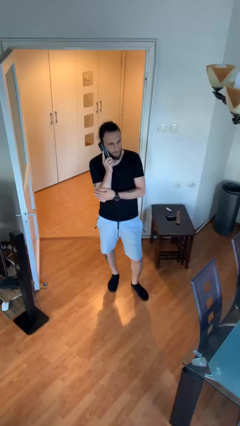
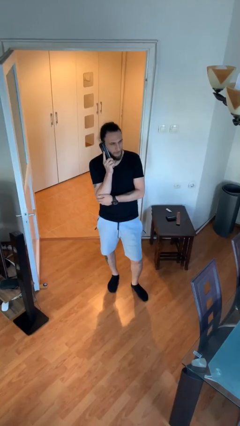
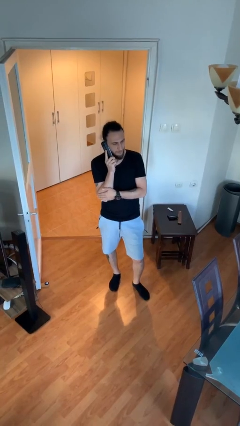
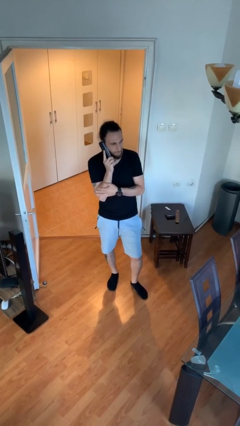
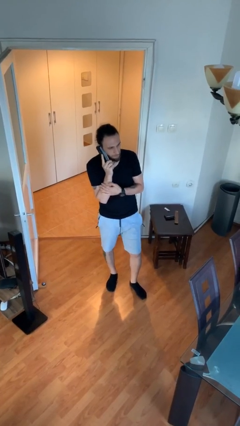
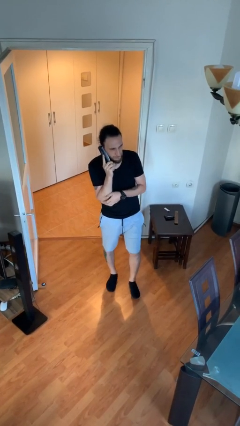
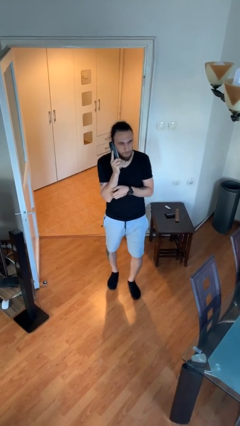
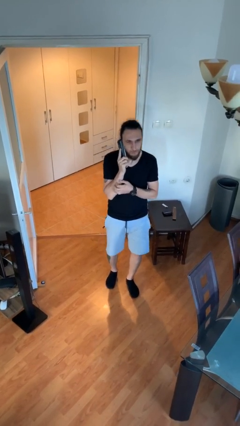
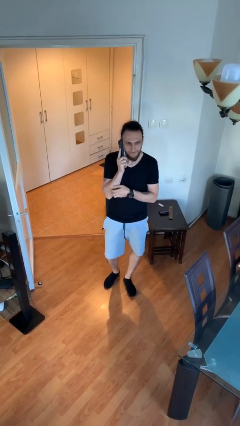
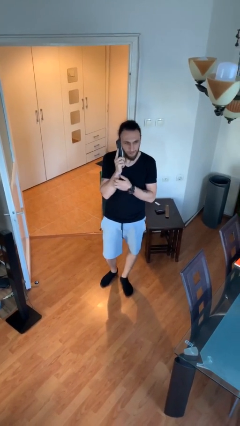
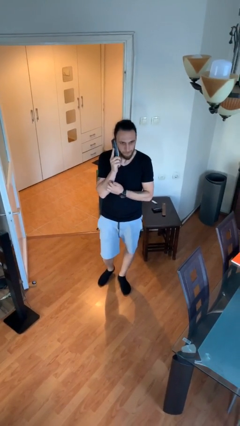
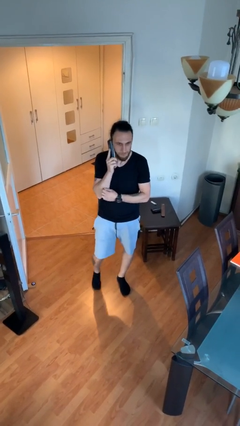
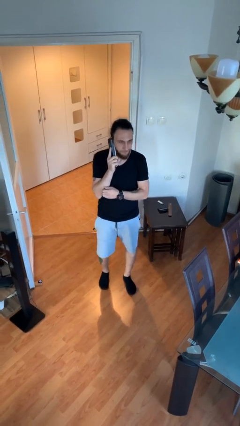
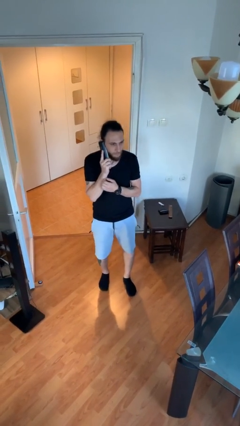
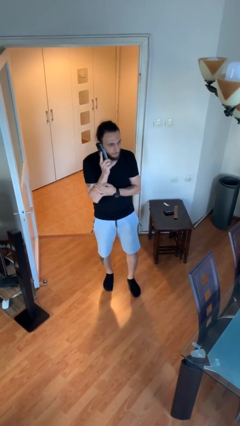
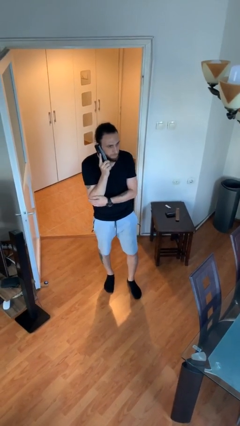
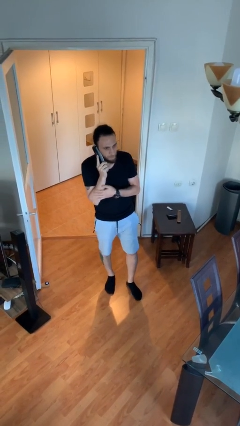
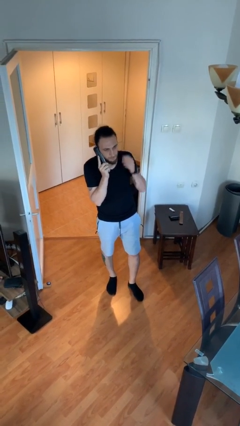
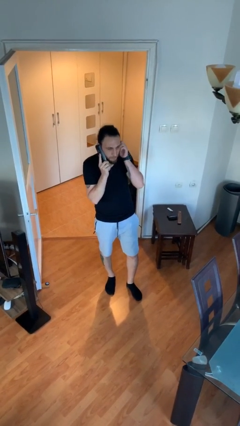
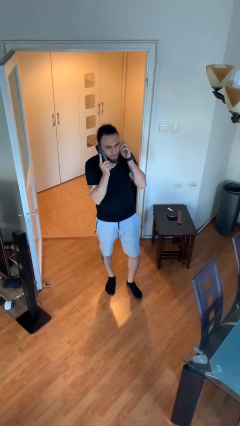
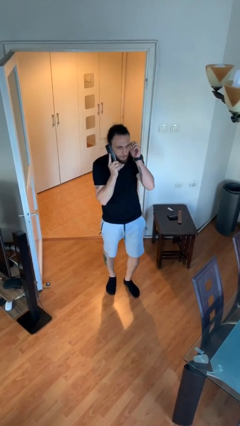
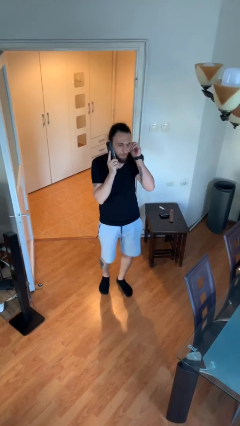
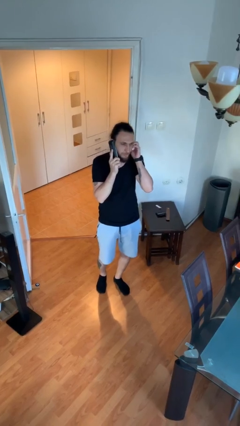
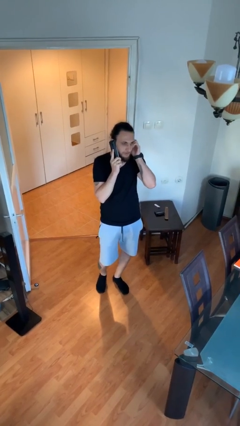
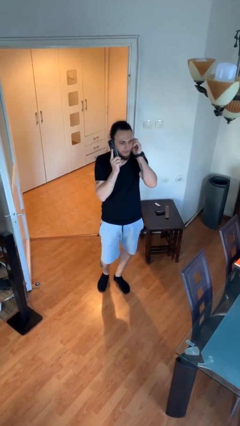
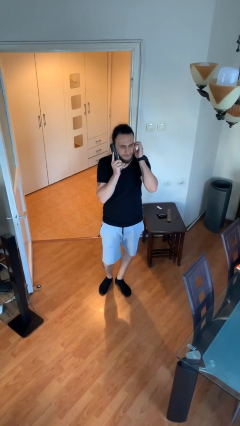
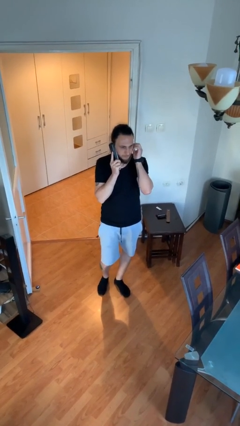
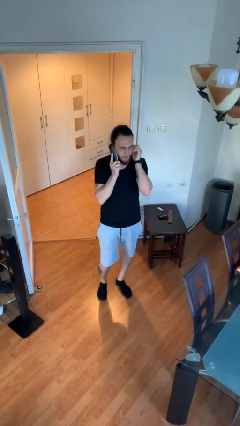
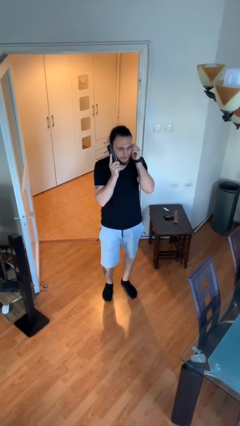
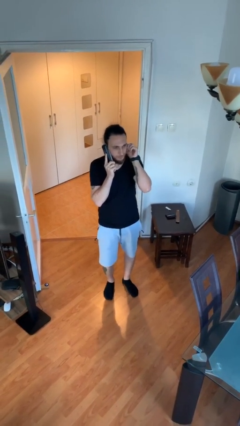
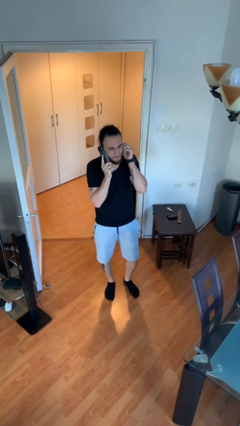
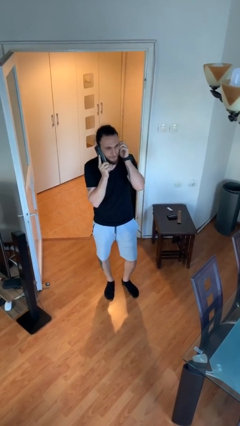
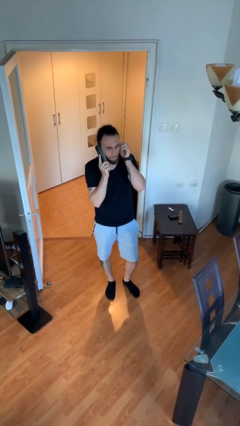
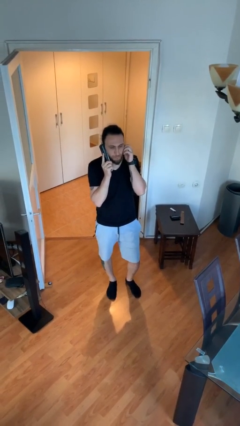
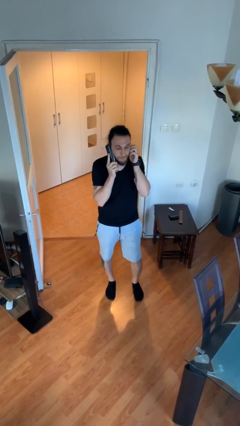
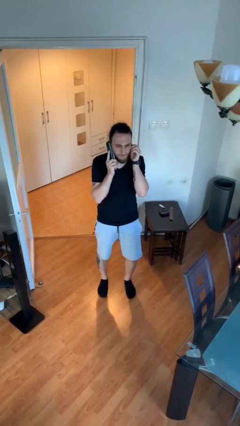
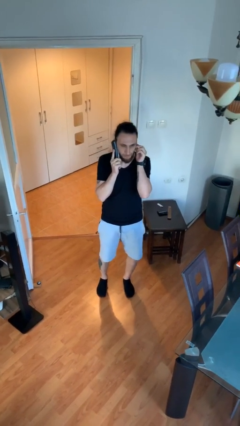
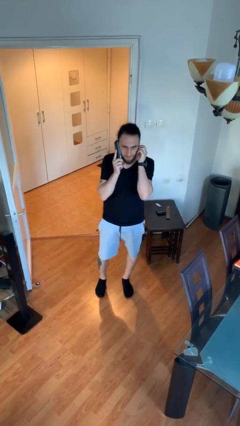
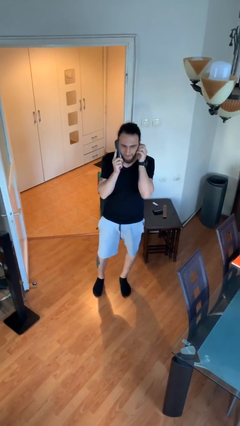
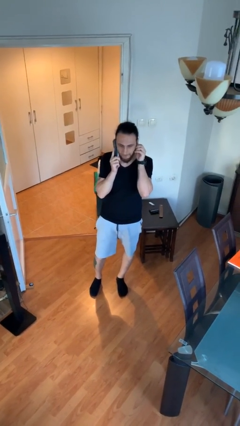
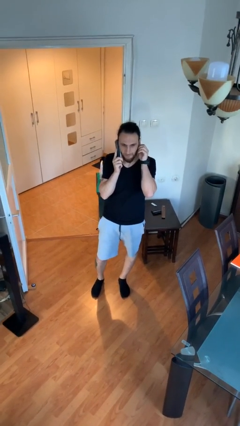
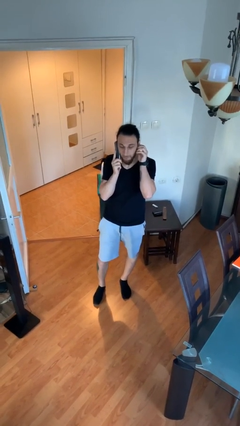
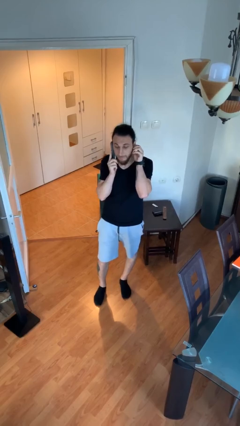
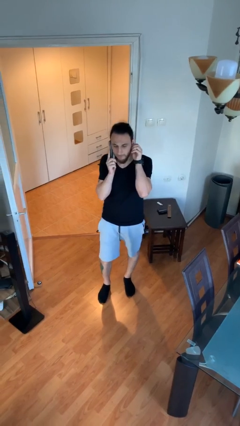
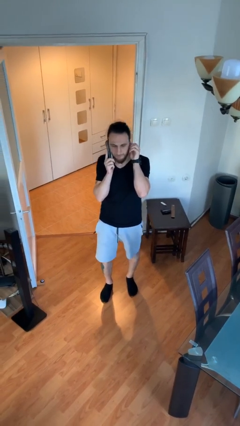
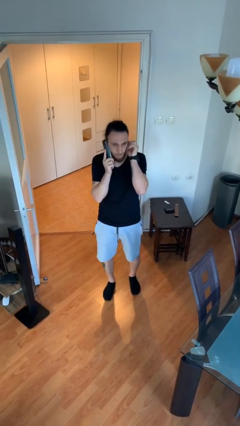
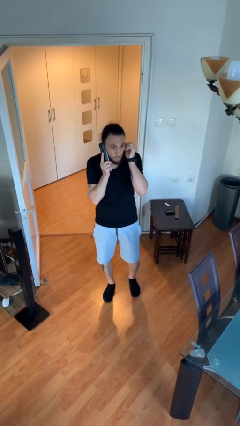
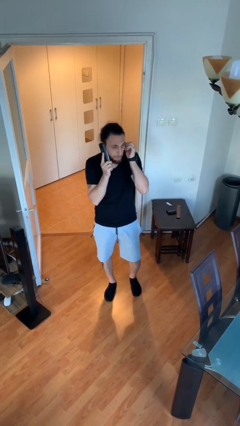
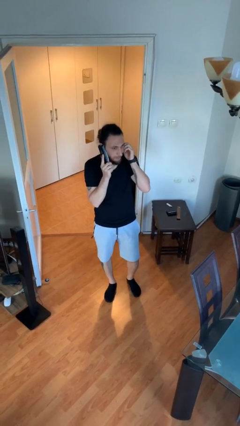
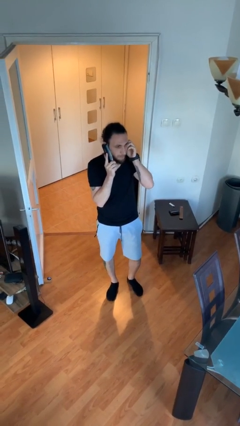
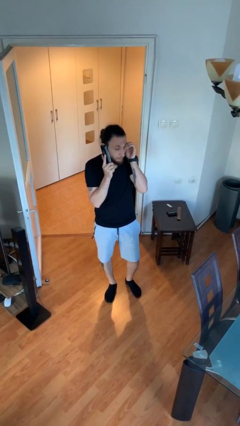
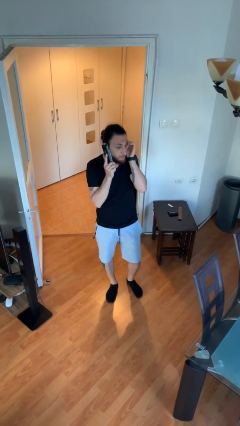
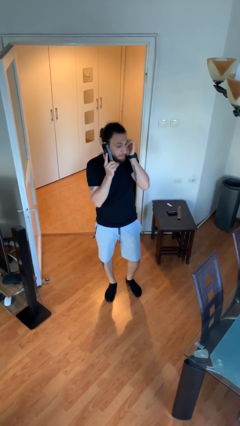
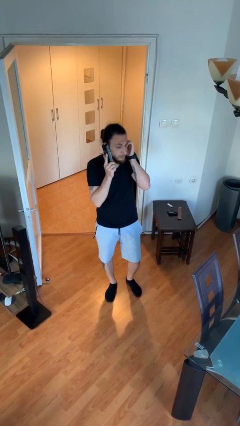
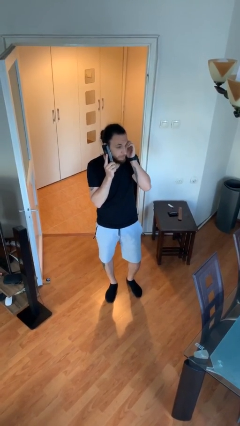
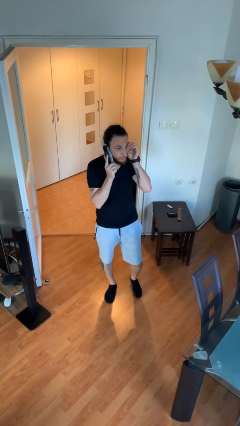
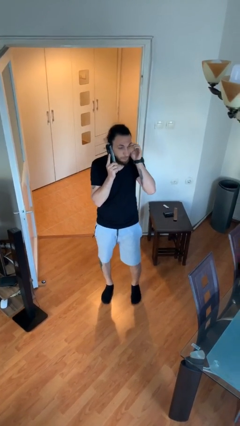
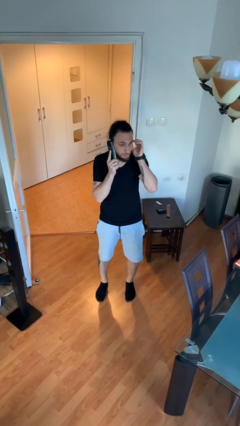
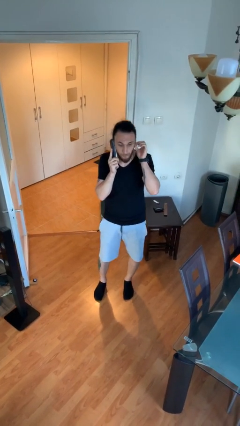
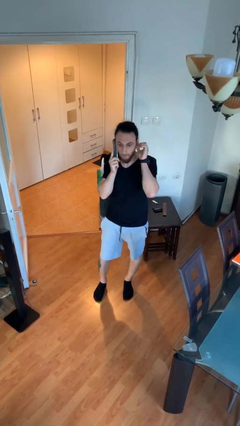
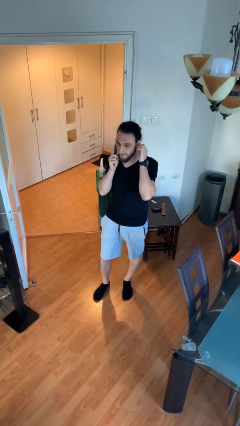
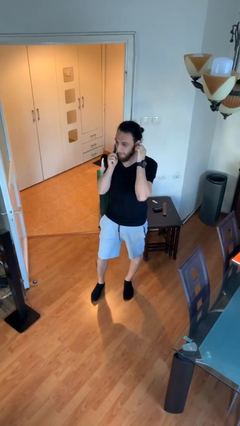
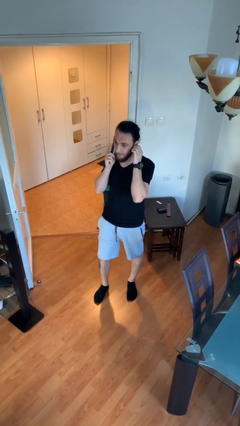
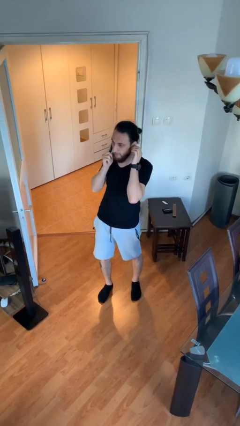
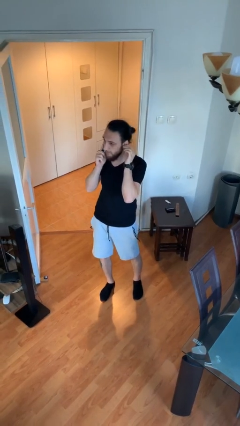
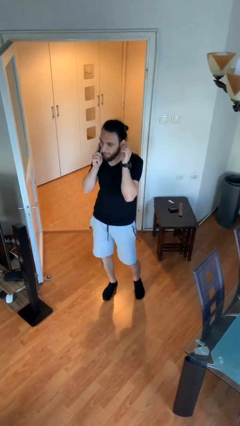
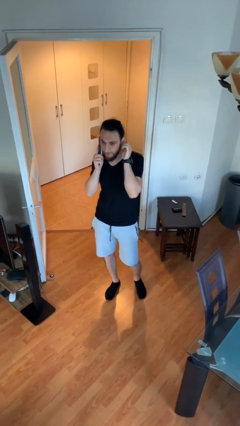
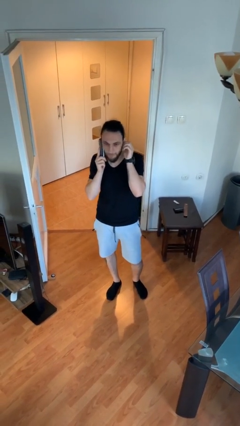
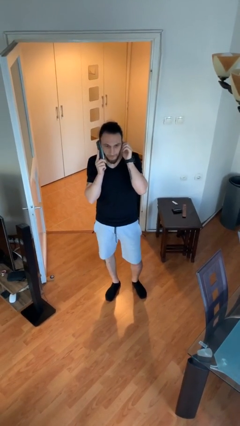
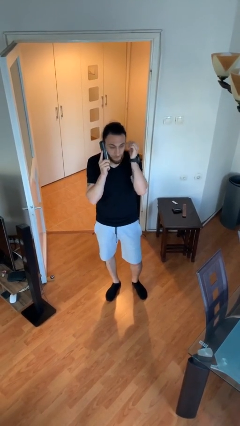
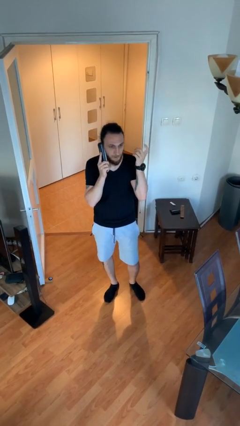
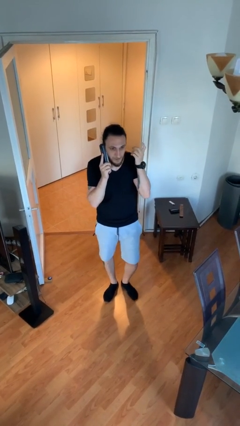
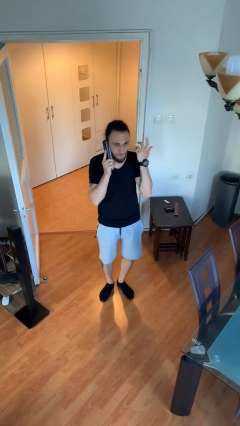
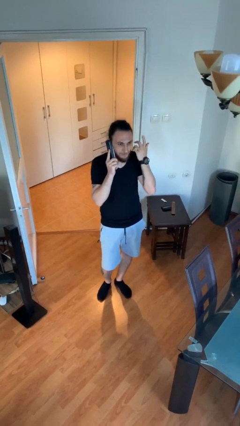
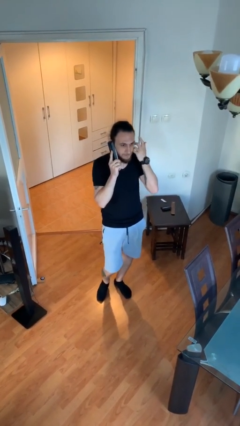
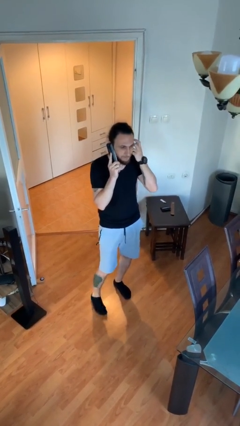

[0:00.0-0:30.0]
person talks on phone

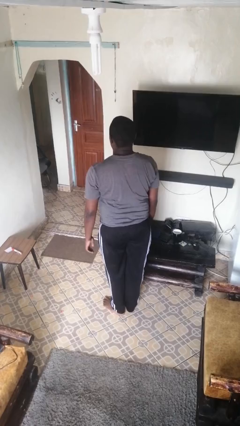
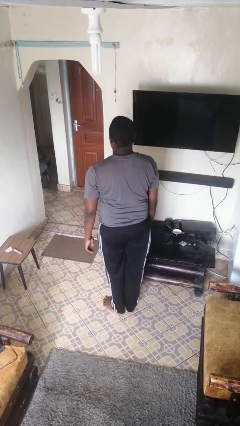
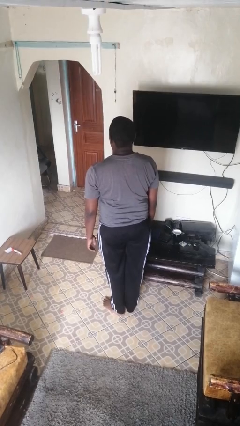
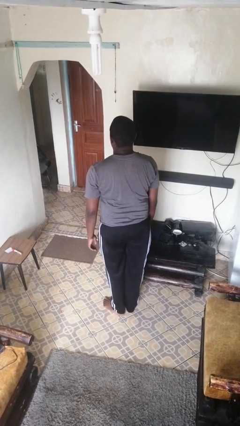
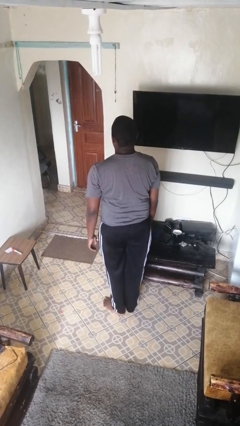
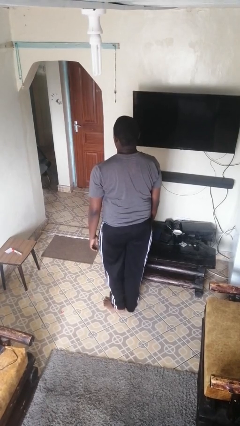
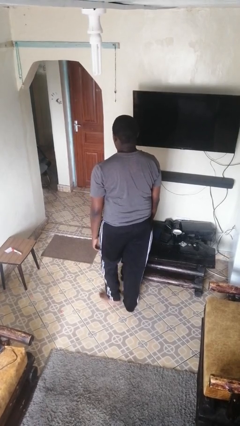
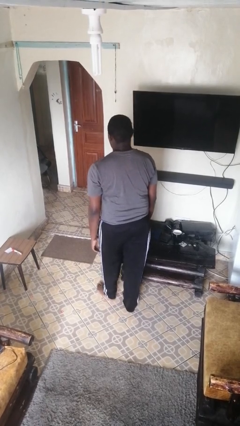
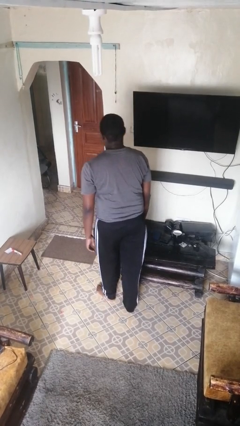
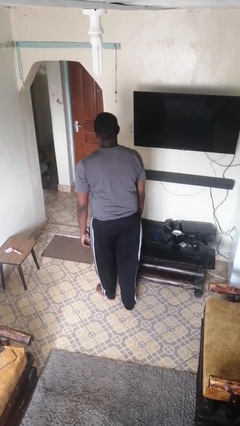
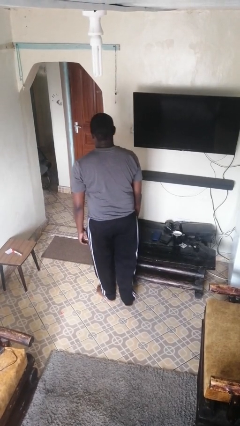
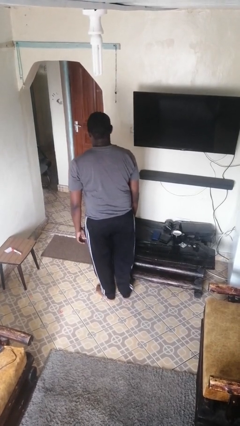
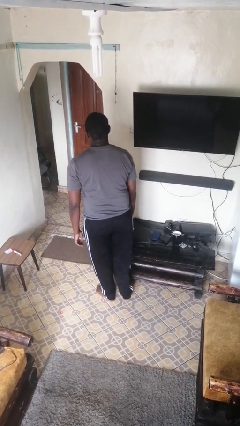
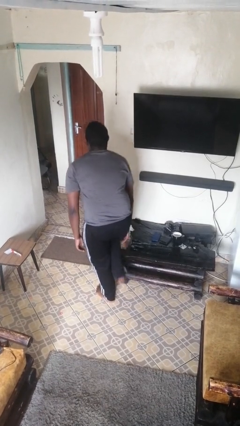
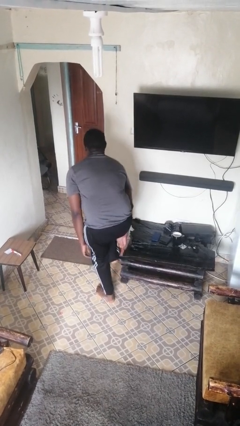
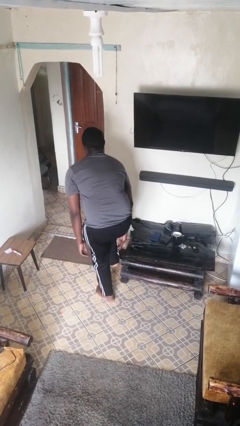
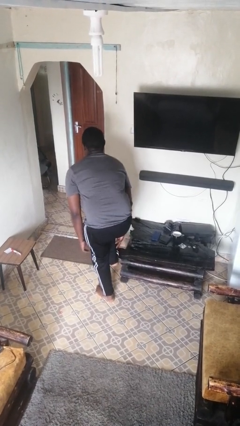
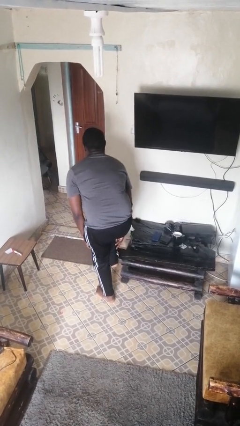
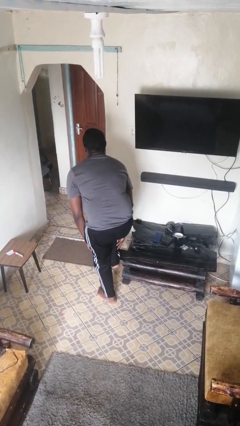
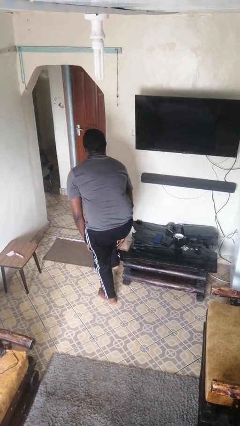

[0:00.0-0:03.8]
person bumps into table
